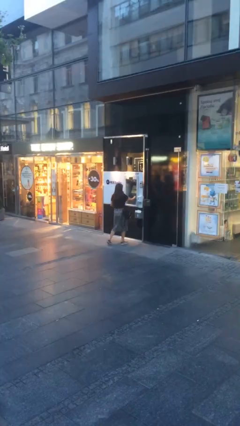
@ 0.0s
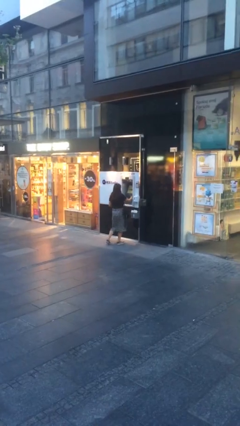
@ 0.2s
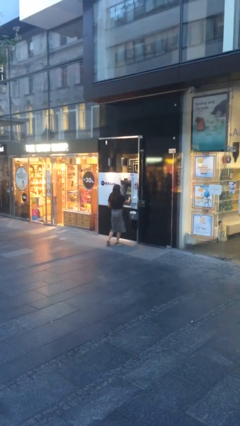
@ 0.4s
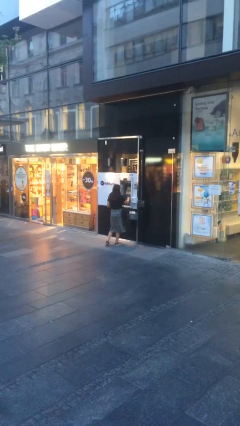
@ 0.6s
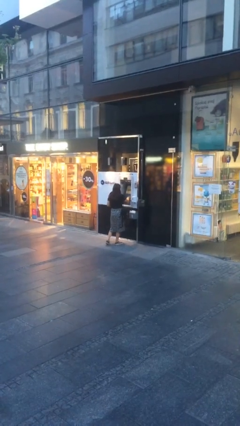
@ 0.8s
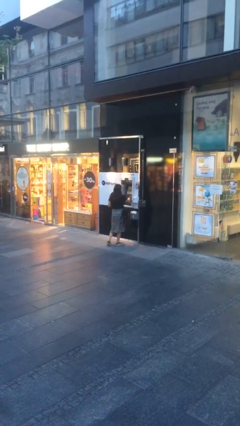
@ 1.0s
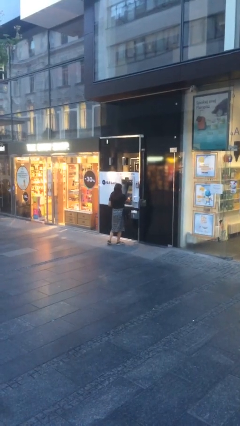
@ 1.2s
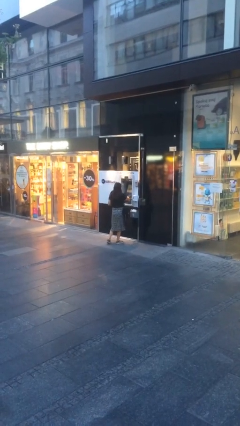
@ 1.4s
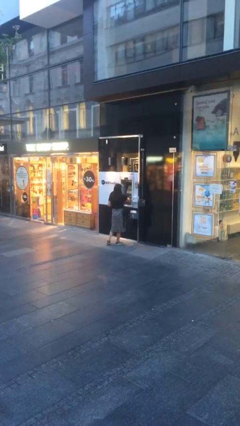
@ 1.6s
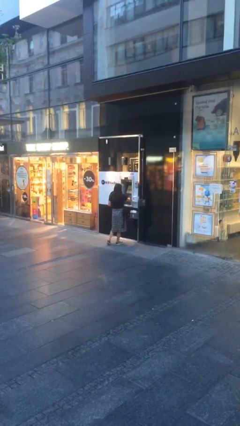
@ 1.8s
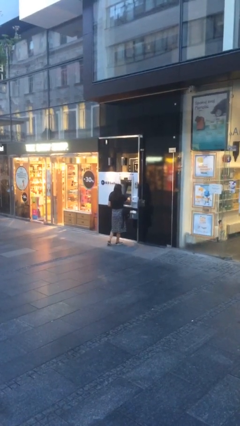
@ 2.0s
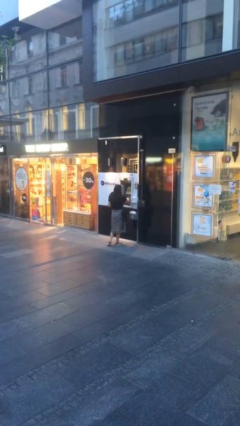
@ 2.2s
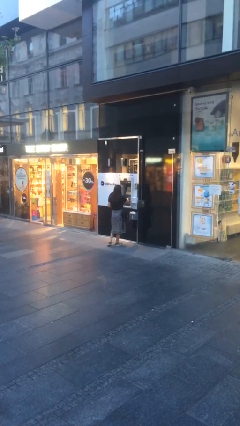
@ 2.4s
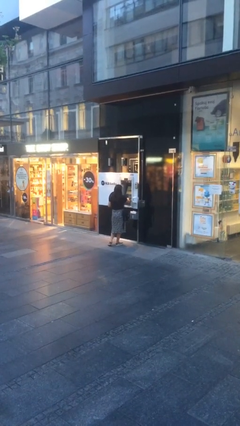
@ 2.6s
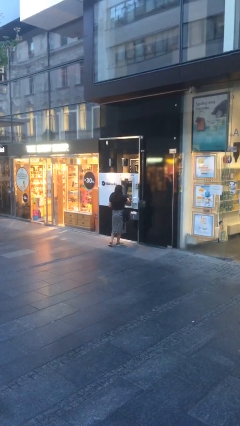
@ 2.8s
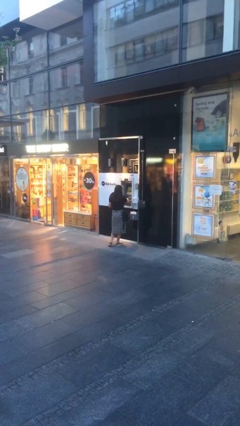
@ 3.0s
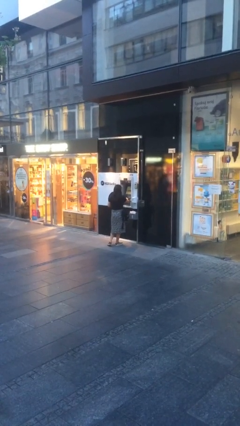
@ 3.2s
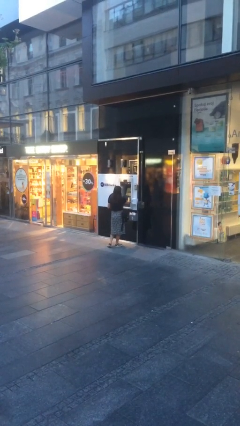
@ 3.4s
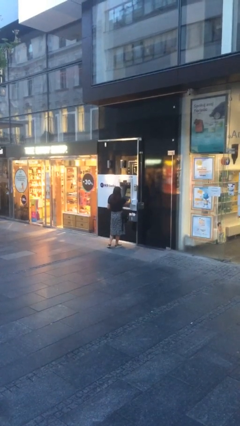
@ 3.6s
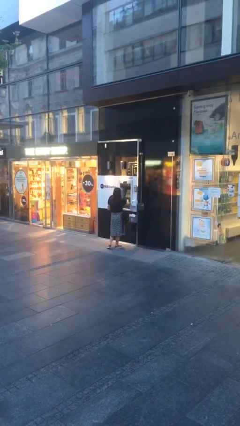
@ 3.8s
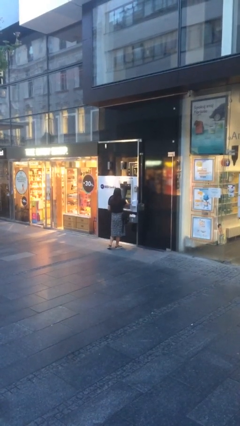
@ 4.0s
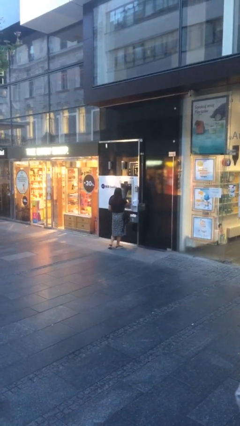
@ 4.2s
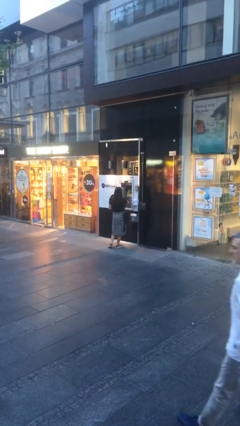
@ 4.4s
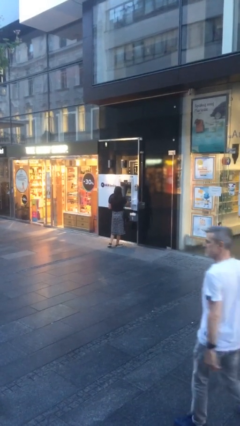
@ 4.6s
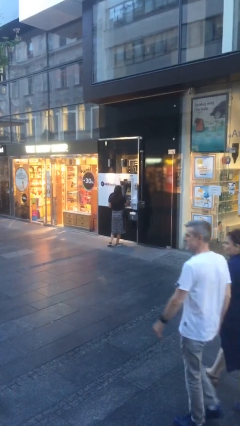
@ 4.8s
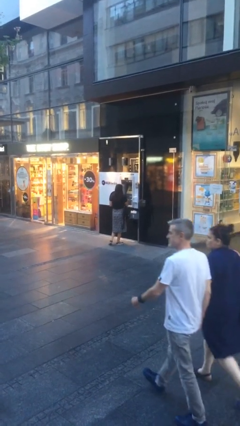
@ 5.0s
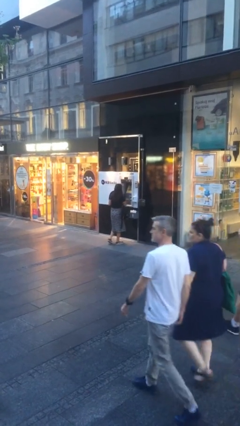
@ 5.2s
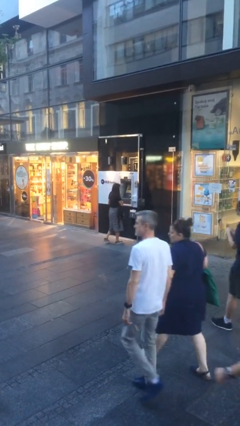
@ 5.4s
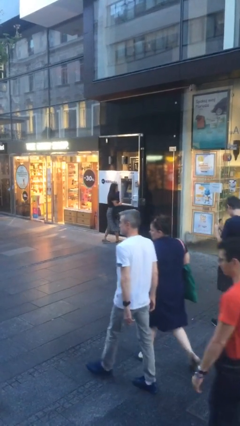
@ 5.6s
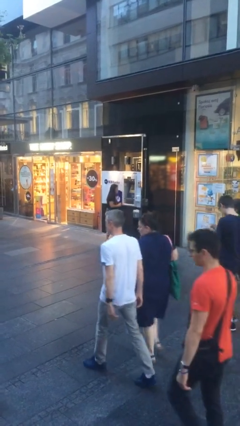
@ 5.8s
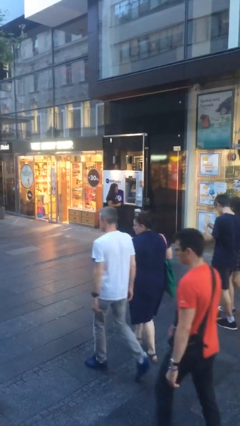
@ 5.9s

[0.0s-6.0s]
person purchases from machine

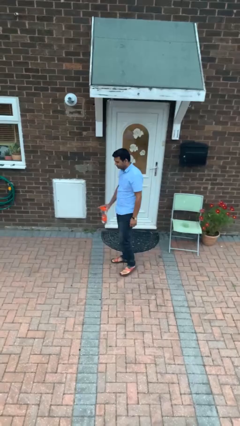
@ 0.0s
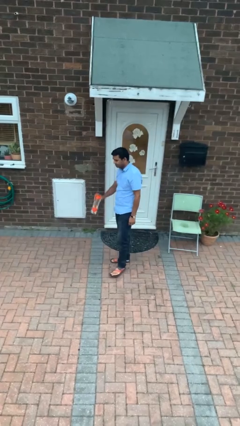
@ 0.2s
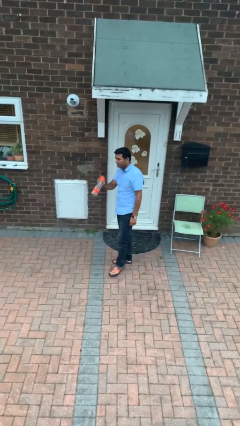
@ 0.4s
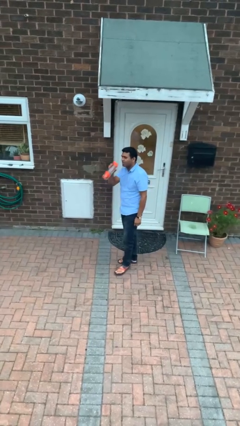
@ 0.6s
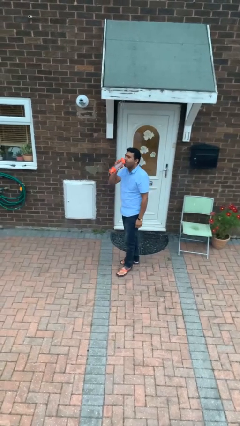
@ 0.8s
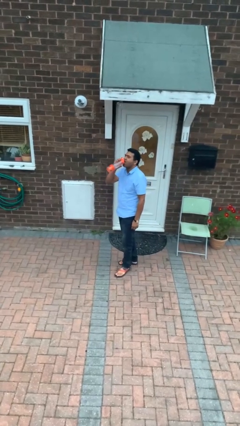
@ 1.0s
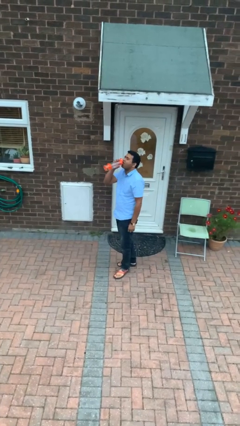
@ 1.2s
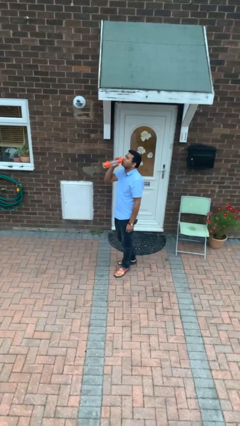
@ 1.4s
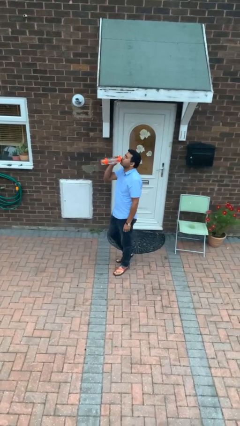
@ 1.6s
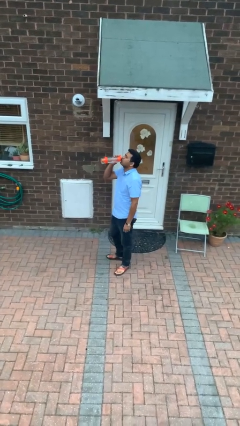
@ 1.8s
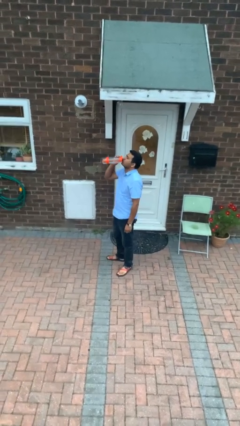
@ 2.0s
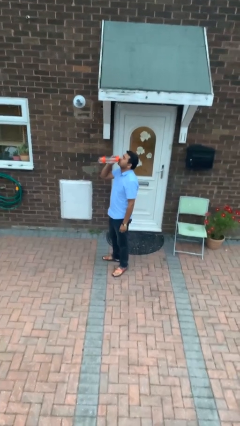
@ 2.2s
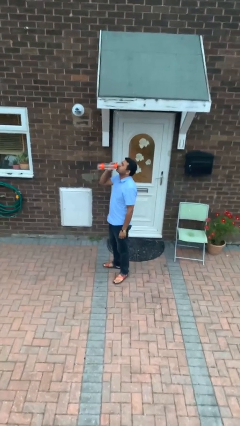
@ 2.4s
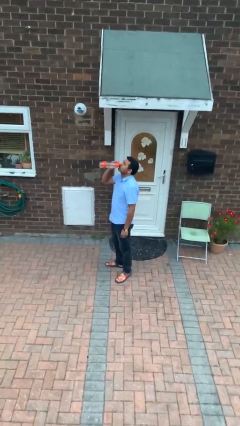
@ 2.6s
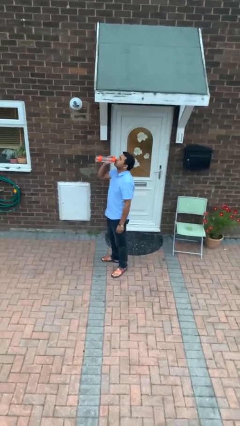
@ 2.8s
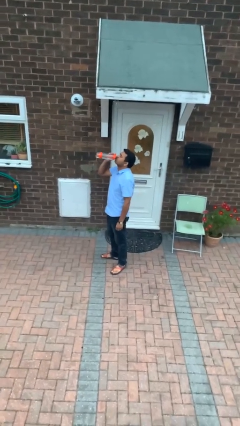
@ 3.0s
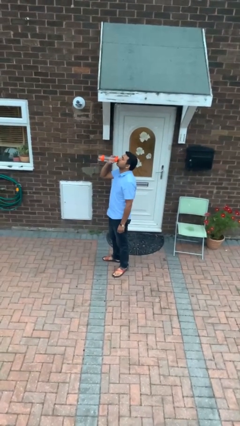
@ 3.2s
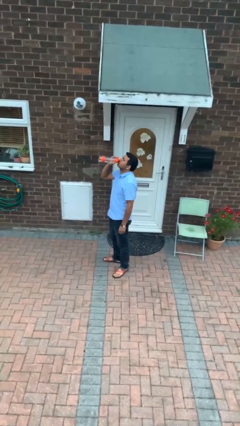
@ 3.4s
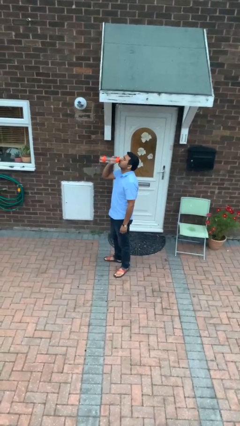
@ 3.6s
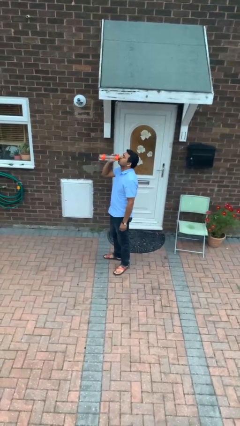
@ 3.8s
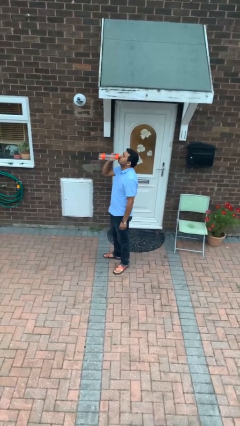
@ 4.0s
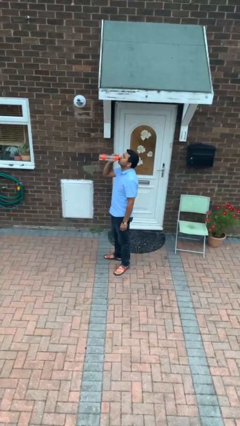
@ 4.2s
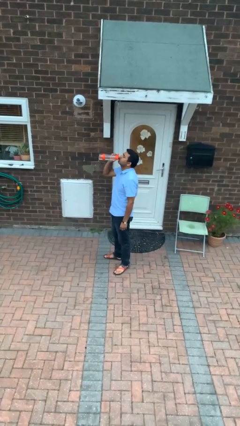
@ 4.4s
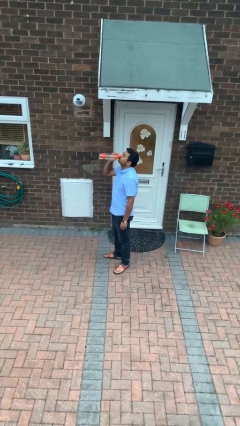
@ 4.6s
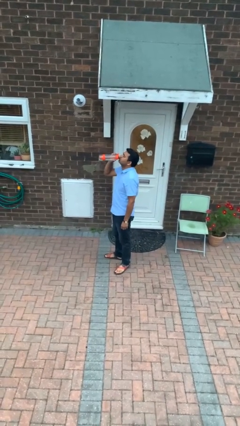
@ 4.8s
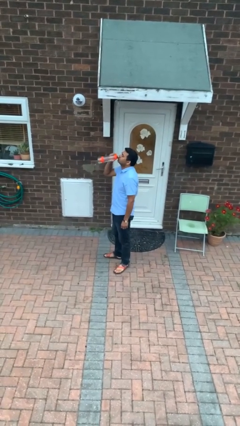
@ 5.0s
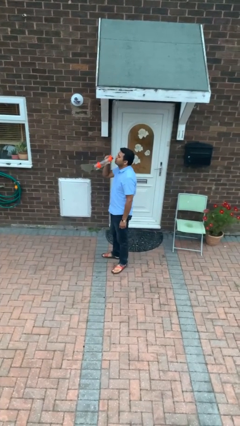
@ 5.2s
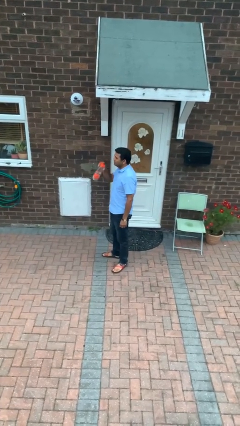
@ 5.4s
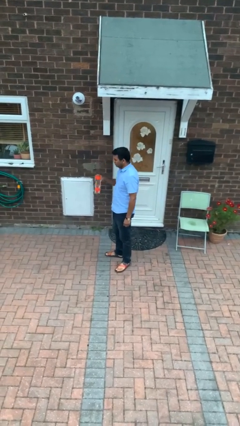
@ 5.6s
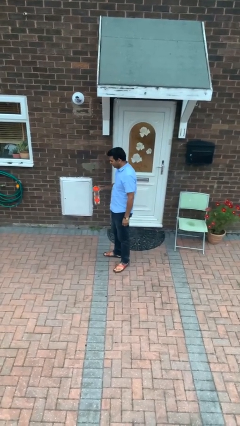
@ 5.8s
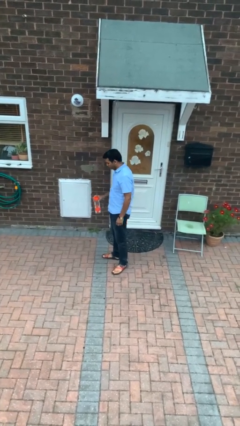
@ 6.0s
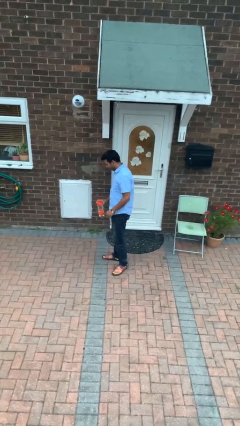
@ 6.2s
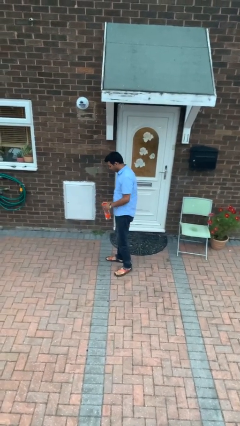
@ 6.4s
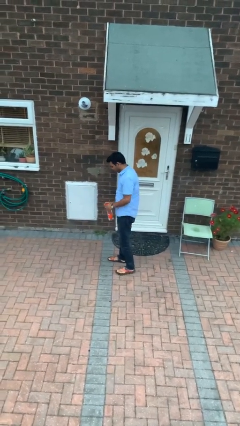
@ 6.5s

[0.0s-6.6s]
person drinks from bottle

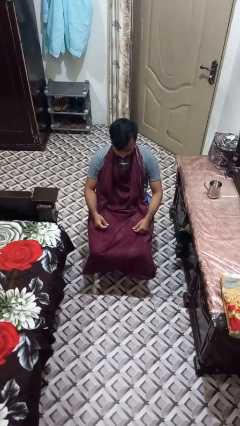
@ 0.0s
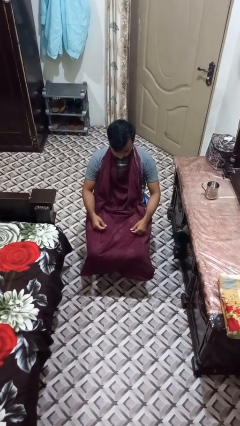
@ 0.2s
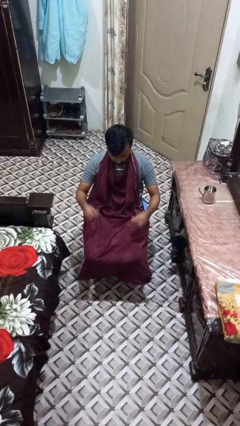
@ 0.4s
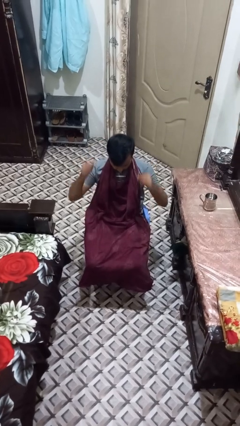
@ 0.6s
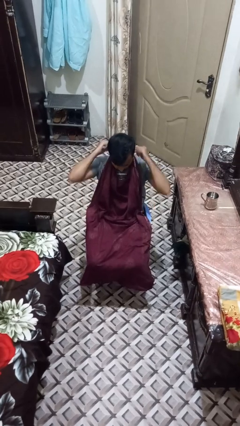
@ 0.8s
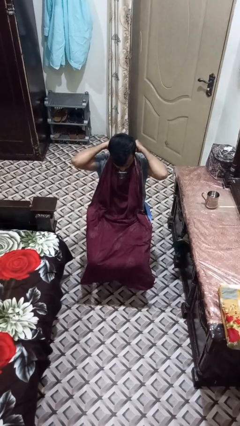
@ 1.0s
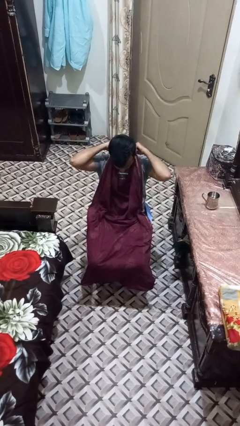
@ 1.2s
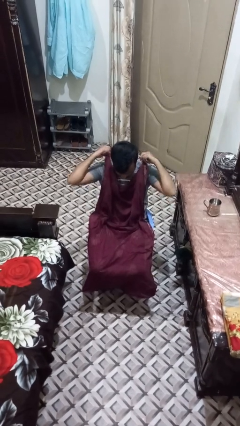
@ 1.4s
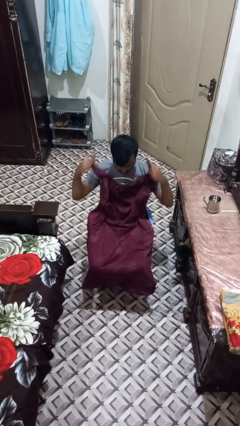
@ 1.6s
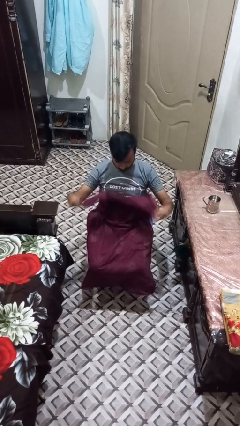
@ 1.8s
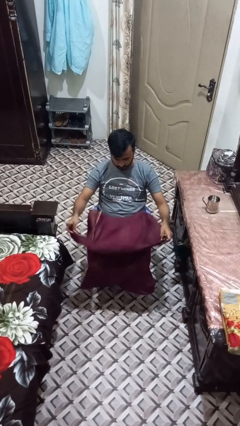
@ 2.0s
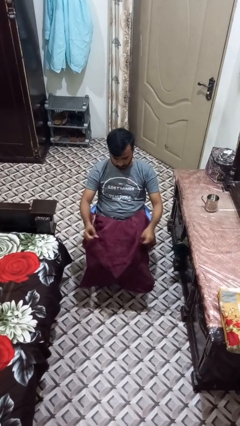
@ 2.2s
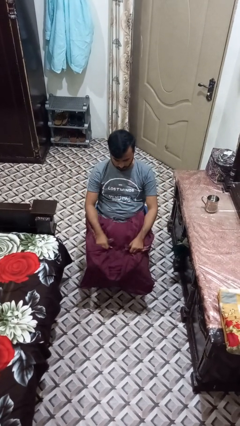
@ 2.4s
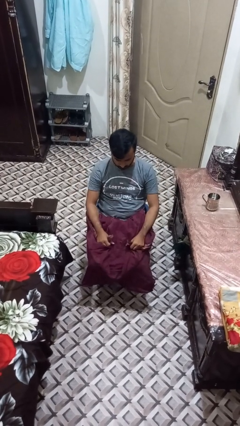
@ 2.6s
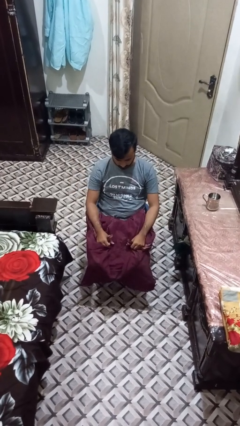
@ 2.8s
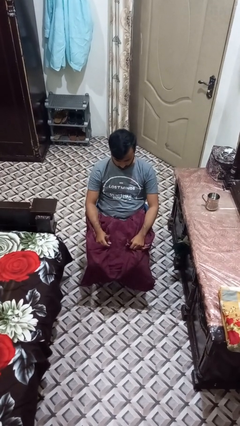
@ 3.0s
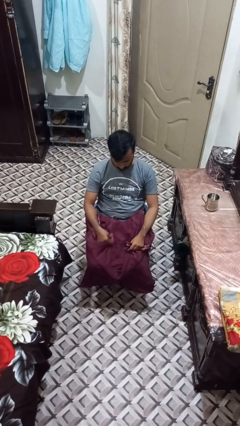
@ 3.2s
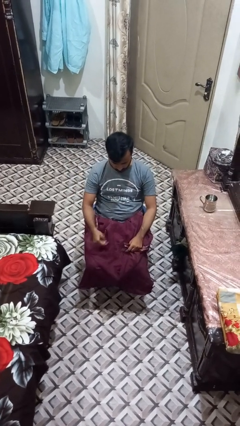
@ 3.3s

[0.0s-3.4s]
person takes off apron

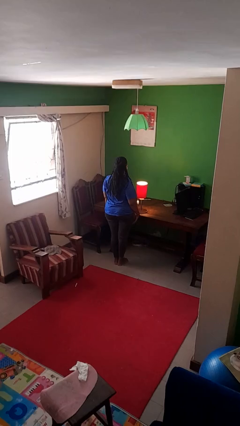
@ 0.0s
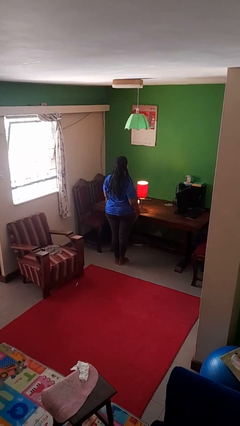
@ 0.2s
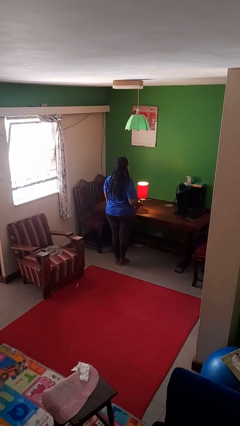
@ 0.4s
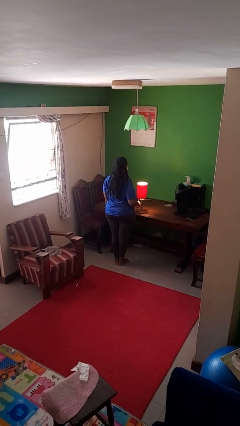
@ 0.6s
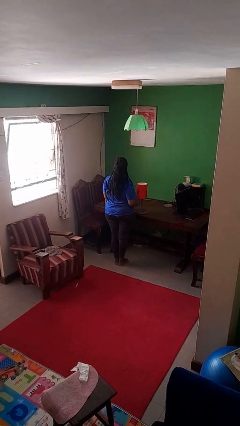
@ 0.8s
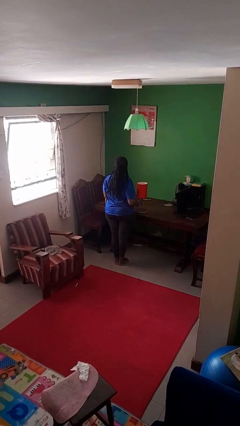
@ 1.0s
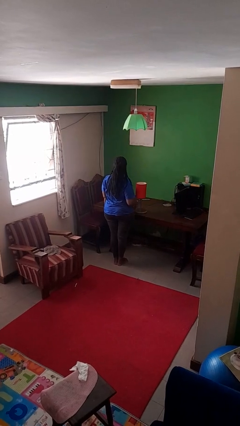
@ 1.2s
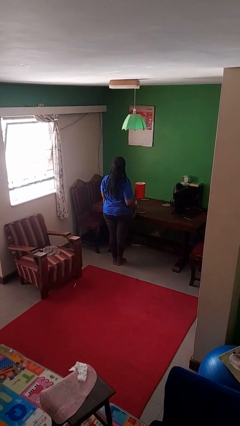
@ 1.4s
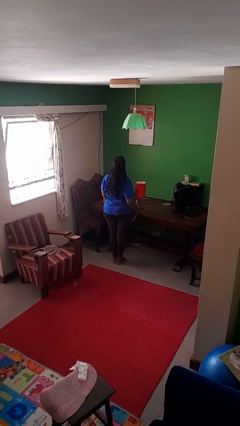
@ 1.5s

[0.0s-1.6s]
person turns off lamp

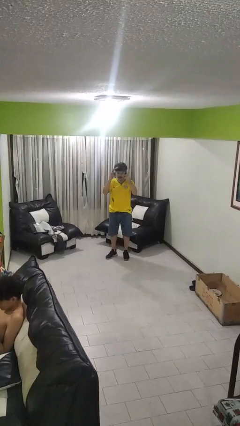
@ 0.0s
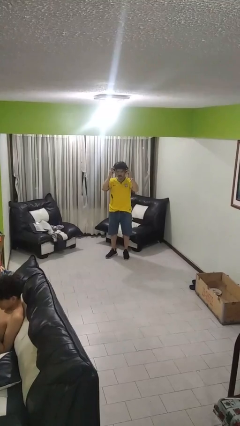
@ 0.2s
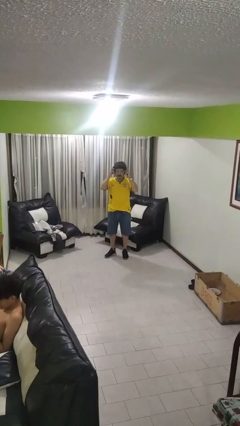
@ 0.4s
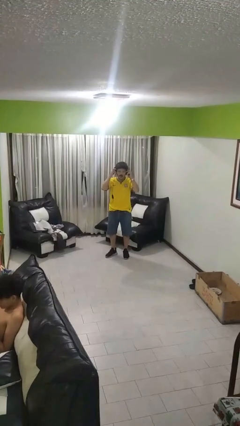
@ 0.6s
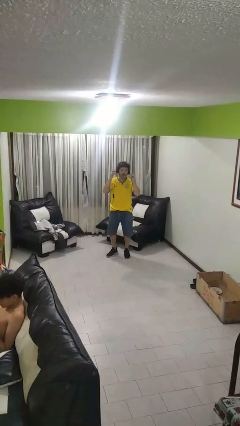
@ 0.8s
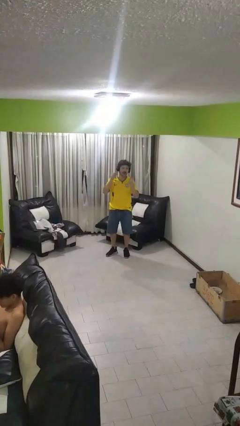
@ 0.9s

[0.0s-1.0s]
person puts on headphones
